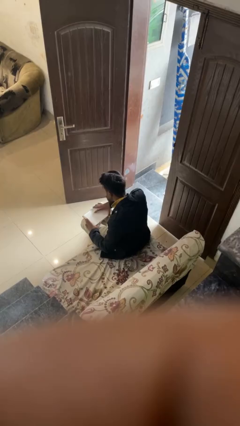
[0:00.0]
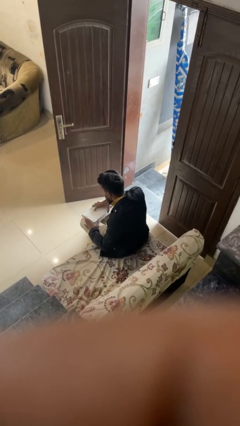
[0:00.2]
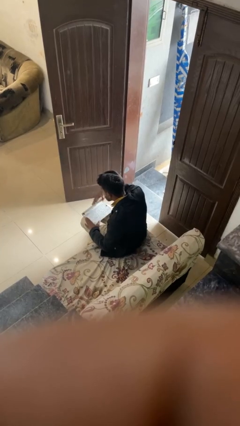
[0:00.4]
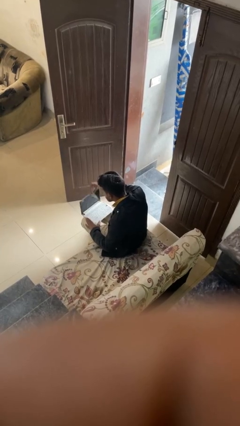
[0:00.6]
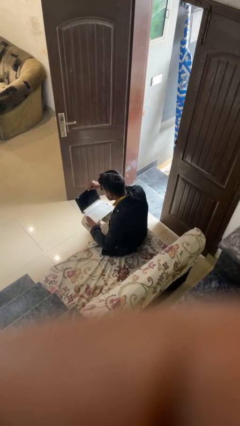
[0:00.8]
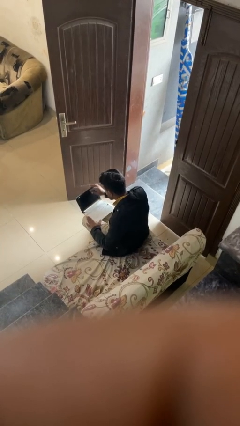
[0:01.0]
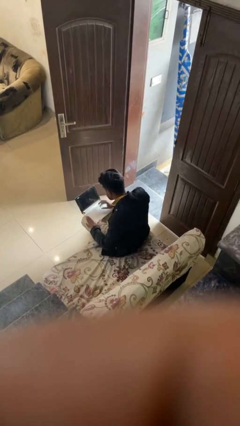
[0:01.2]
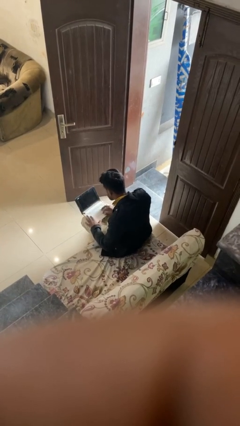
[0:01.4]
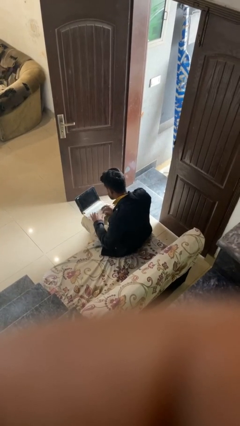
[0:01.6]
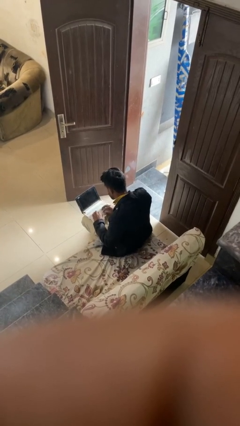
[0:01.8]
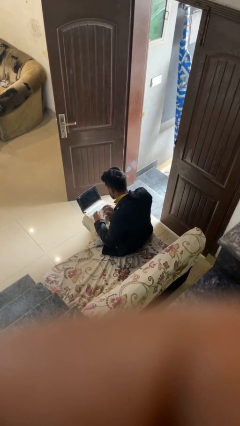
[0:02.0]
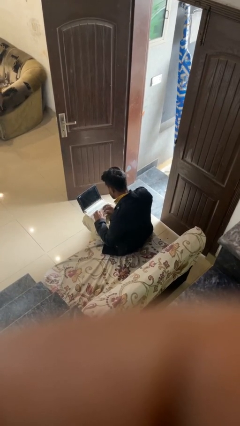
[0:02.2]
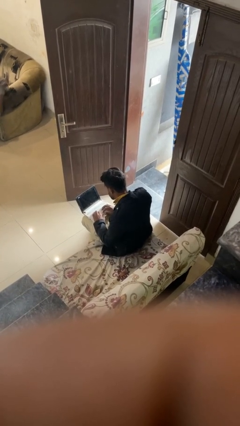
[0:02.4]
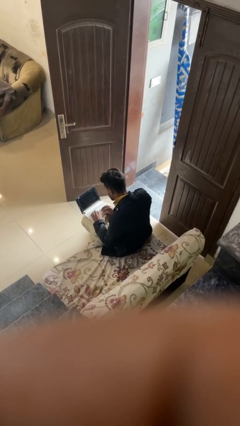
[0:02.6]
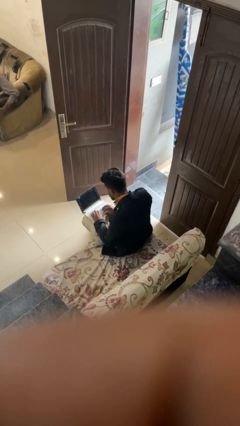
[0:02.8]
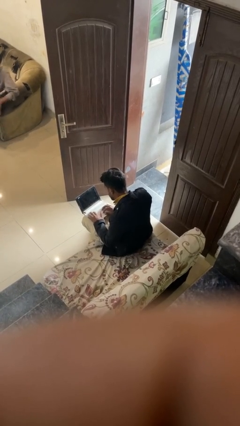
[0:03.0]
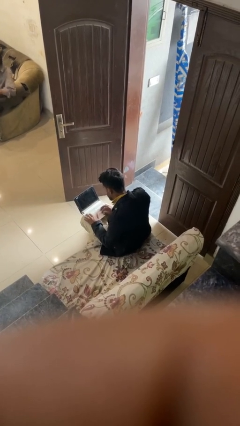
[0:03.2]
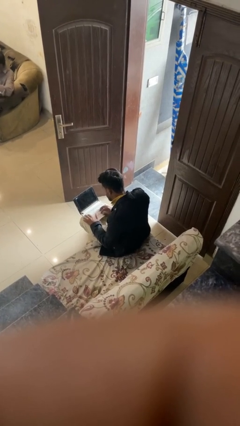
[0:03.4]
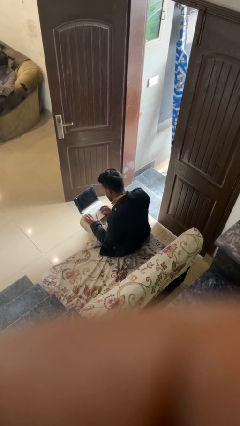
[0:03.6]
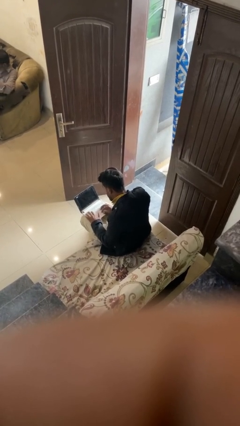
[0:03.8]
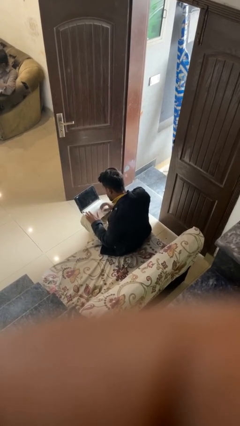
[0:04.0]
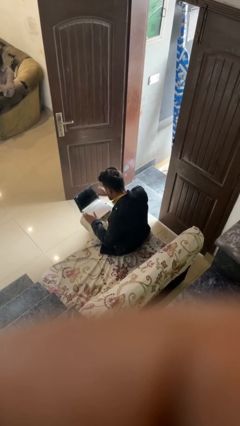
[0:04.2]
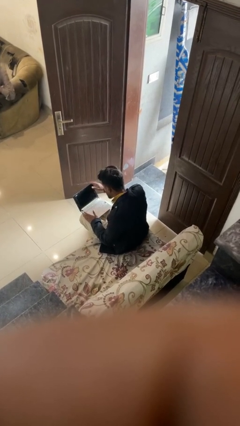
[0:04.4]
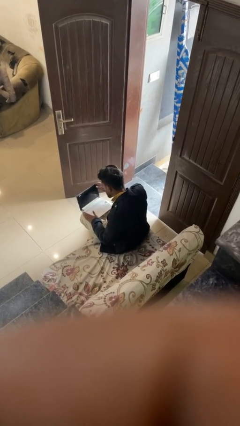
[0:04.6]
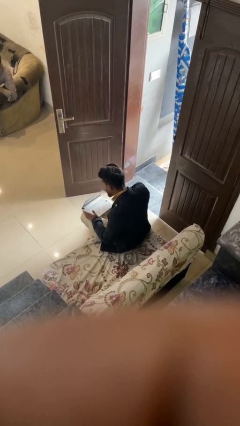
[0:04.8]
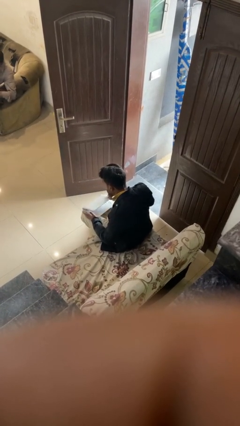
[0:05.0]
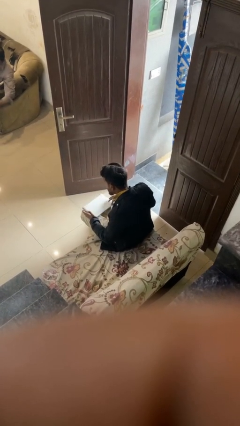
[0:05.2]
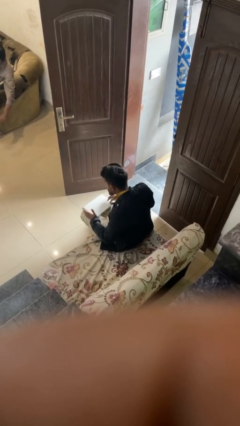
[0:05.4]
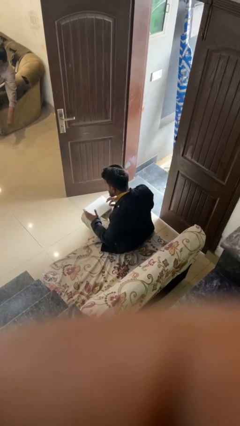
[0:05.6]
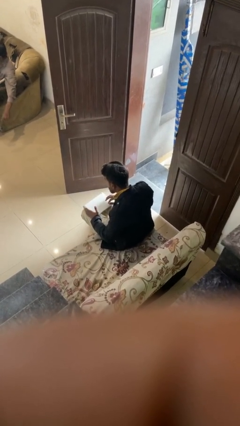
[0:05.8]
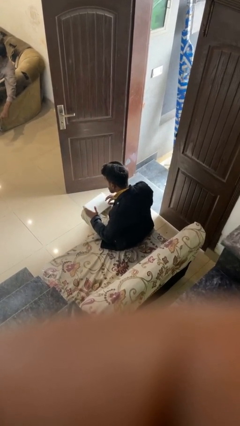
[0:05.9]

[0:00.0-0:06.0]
person interacts with laptop

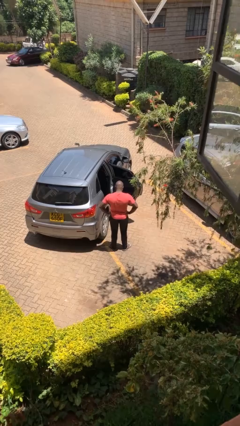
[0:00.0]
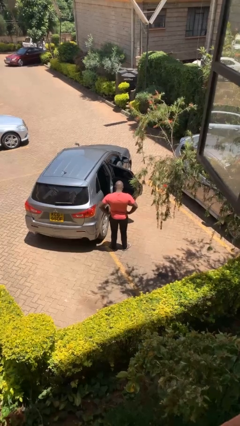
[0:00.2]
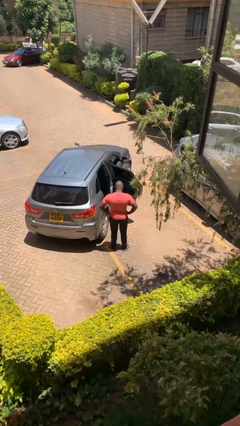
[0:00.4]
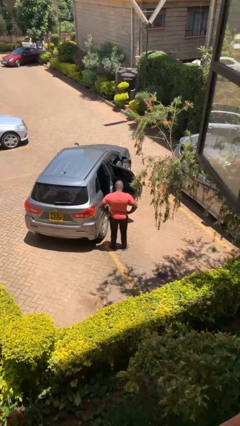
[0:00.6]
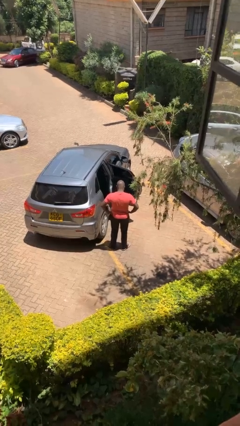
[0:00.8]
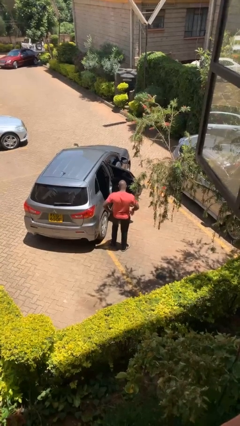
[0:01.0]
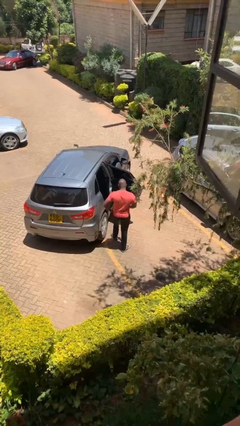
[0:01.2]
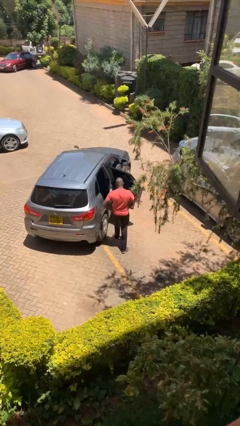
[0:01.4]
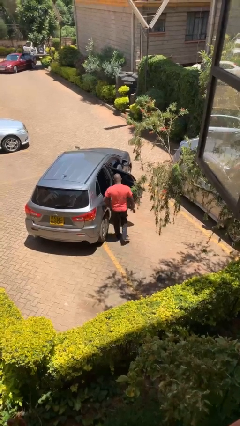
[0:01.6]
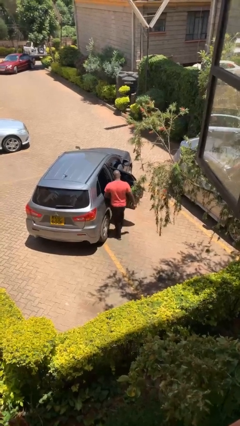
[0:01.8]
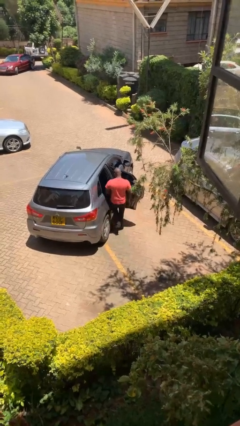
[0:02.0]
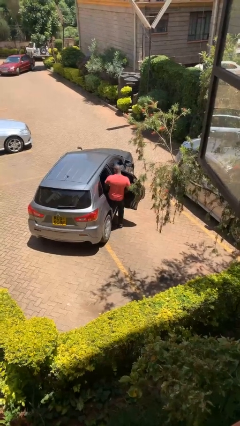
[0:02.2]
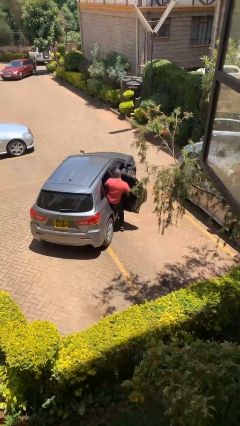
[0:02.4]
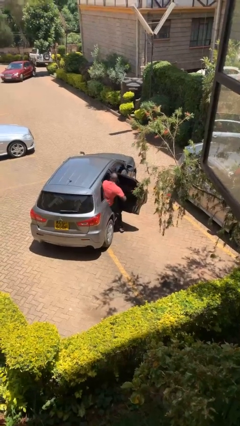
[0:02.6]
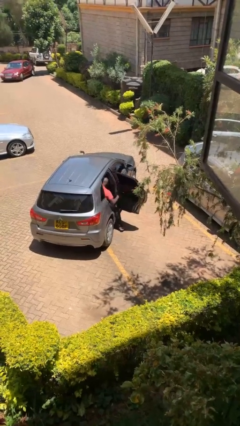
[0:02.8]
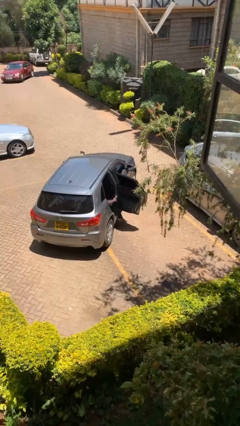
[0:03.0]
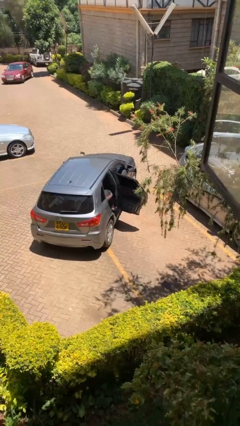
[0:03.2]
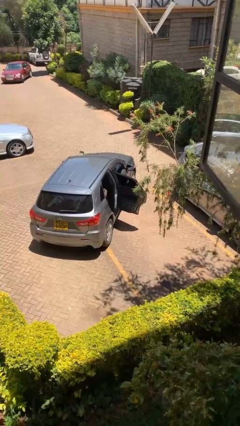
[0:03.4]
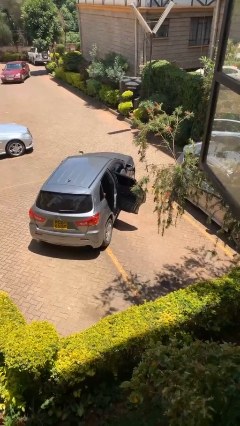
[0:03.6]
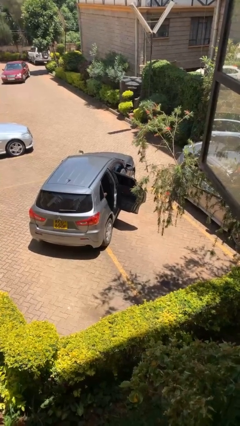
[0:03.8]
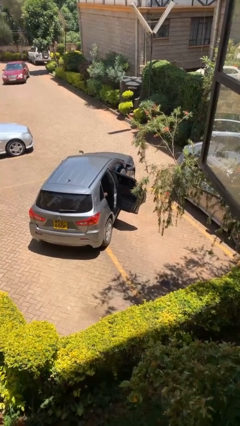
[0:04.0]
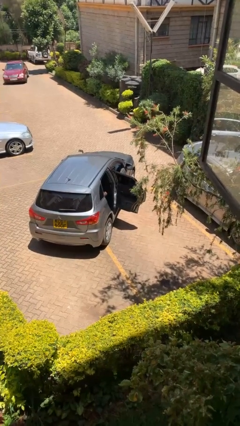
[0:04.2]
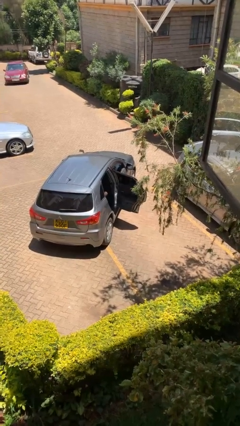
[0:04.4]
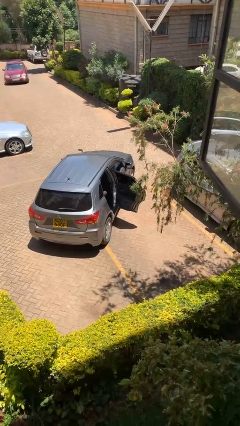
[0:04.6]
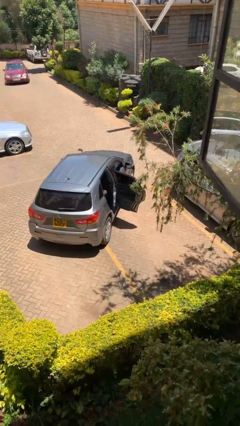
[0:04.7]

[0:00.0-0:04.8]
person enters car

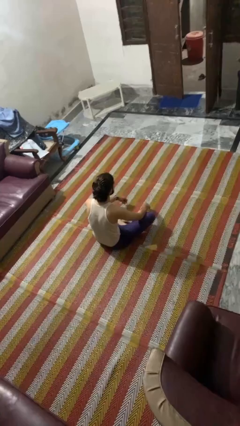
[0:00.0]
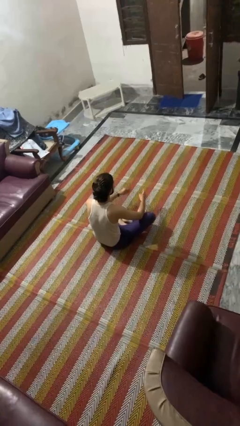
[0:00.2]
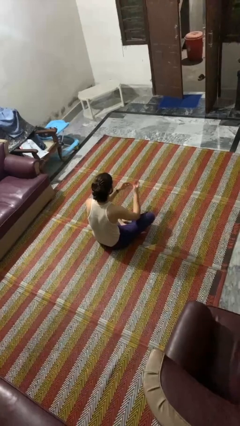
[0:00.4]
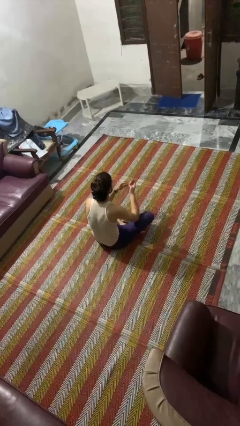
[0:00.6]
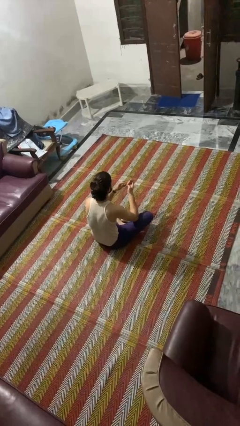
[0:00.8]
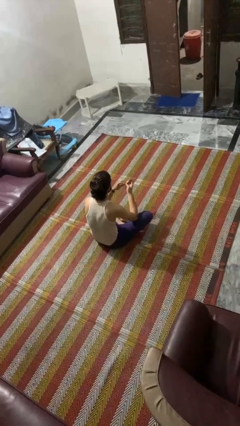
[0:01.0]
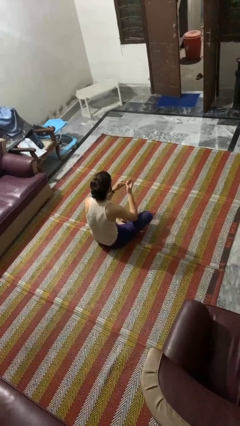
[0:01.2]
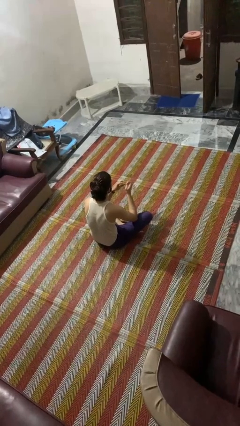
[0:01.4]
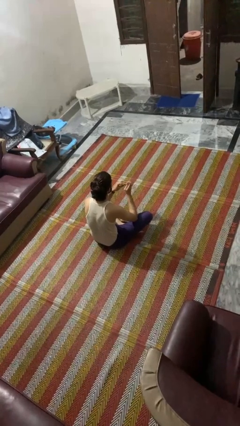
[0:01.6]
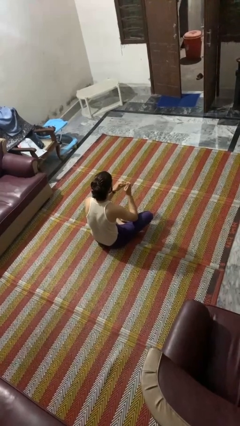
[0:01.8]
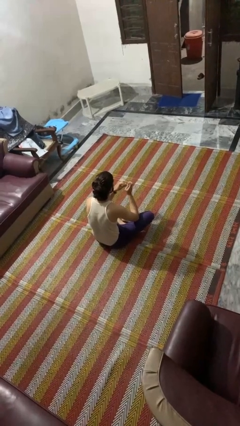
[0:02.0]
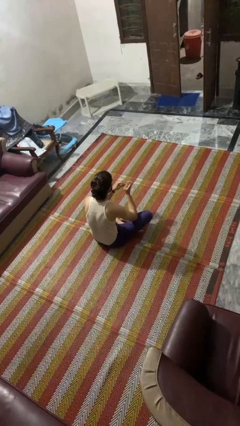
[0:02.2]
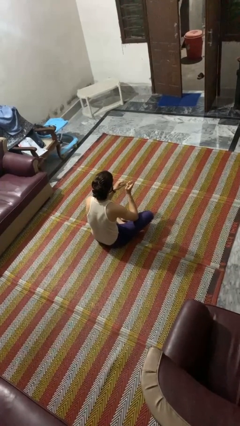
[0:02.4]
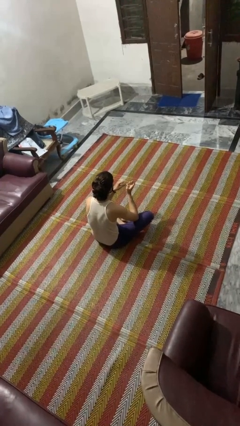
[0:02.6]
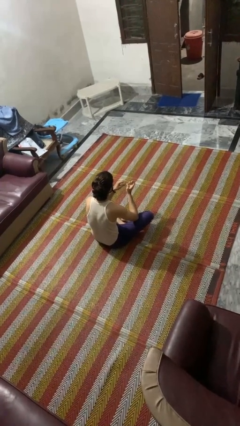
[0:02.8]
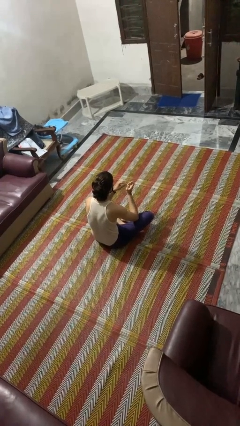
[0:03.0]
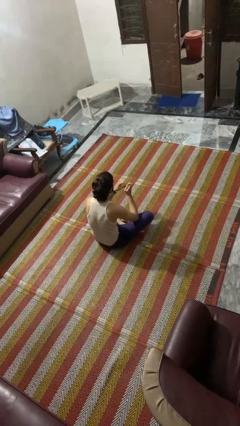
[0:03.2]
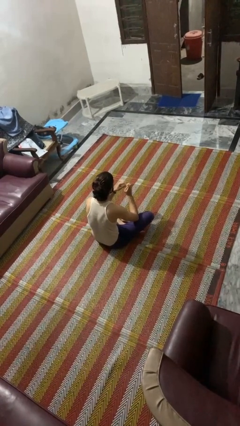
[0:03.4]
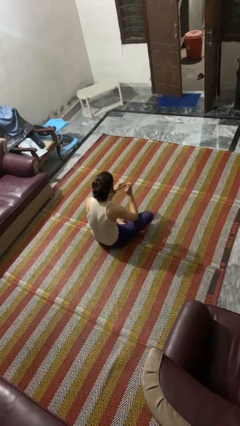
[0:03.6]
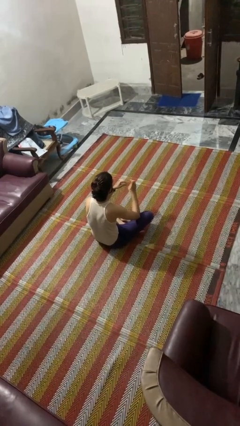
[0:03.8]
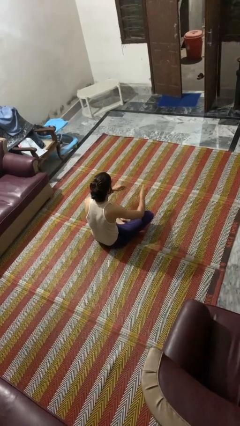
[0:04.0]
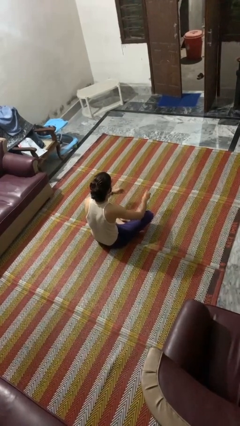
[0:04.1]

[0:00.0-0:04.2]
person files fingernails

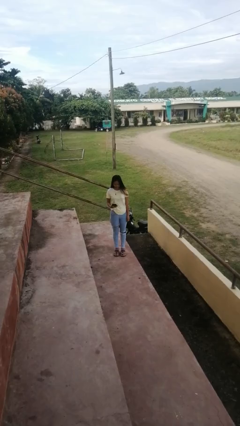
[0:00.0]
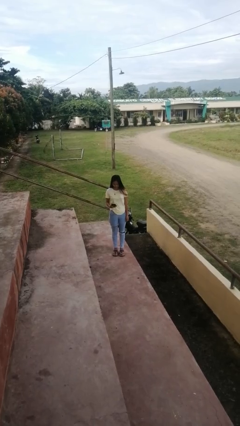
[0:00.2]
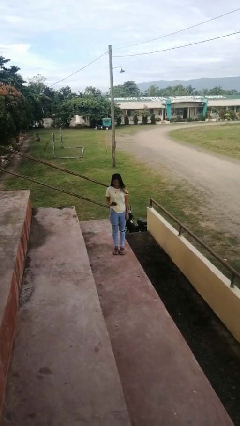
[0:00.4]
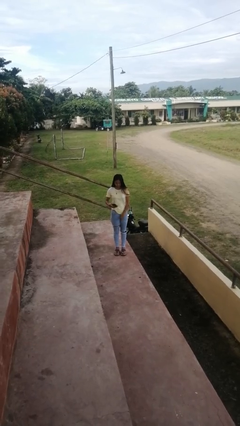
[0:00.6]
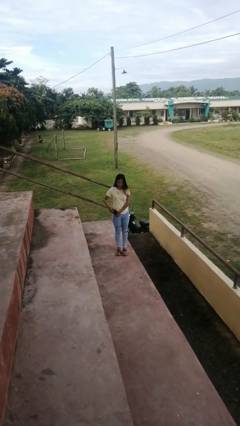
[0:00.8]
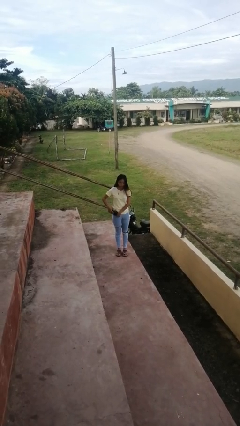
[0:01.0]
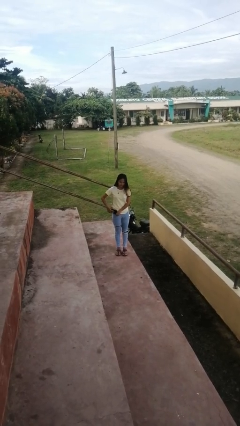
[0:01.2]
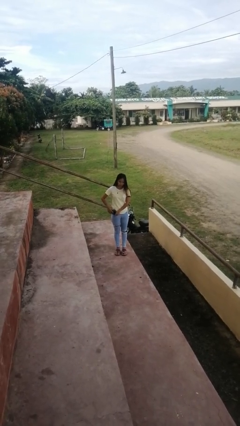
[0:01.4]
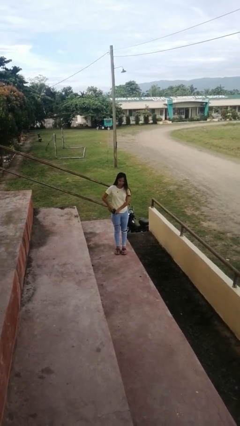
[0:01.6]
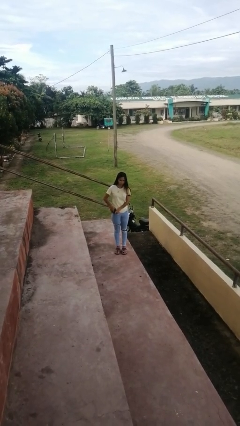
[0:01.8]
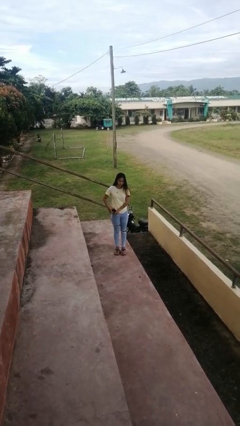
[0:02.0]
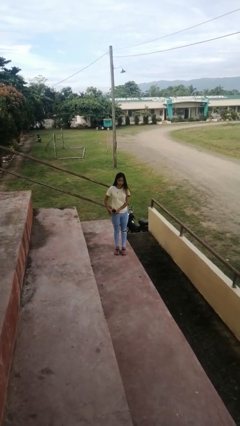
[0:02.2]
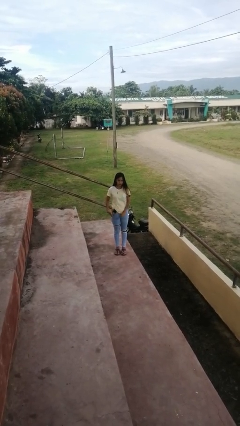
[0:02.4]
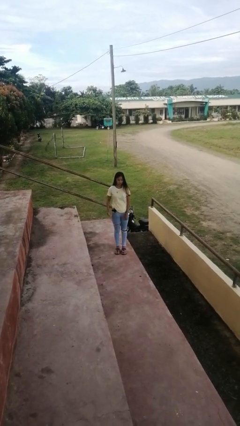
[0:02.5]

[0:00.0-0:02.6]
person puts phone into pocket
